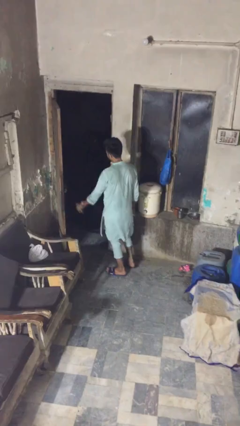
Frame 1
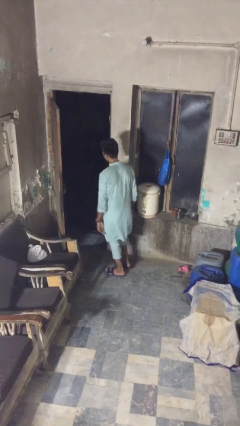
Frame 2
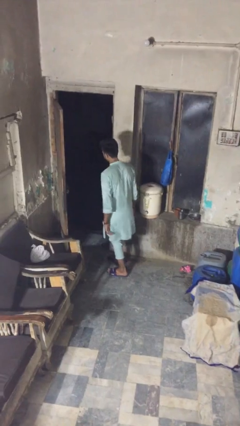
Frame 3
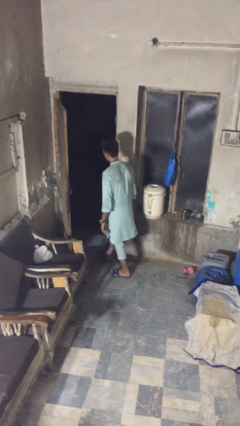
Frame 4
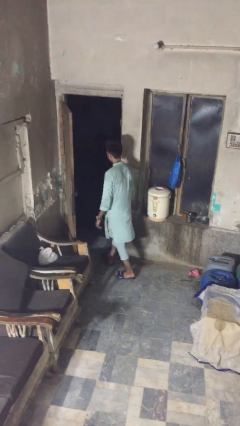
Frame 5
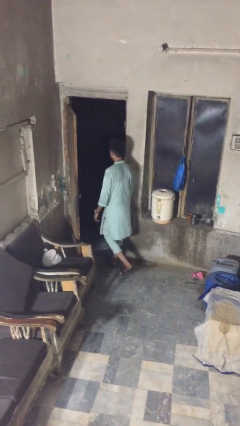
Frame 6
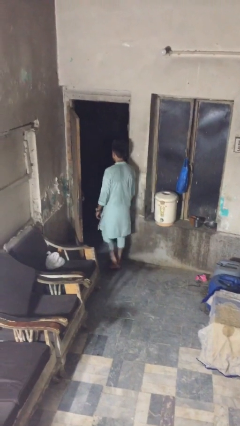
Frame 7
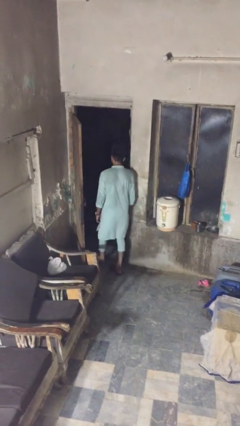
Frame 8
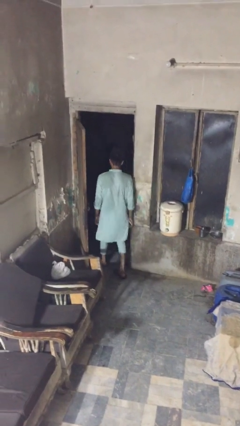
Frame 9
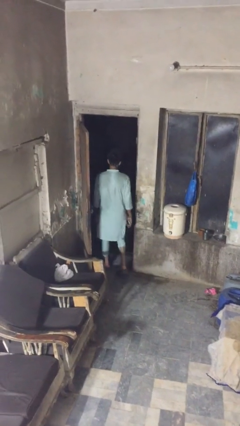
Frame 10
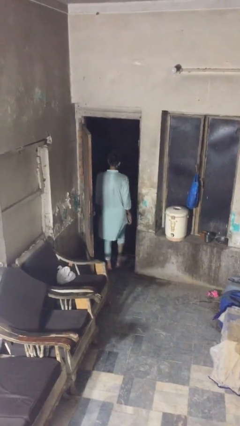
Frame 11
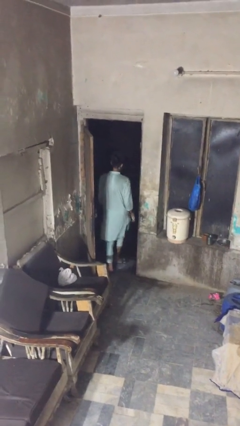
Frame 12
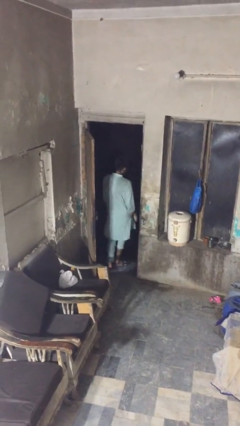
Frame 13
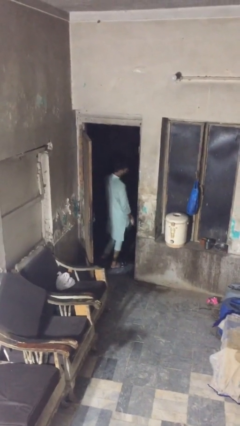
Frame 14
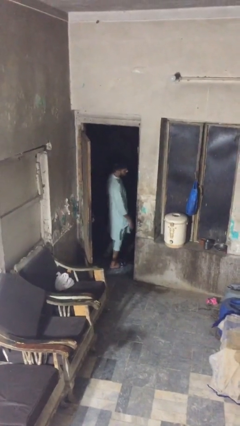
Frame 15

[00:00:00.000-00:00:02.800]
person exits scene through structure

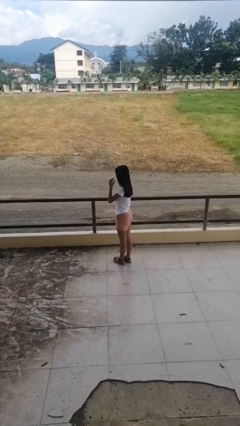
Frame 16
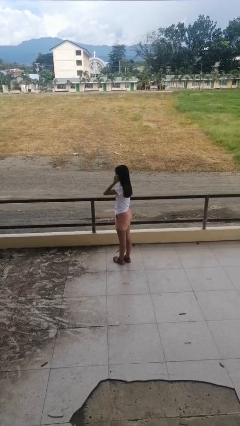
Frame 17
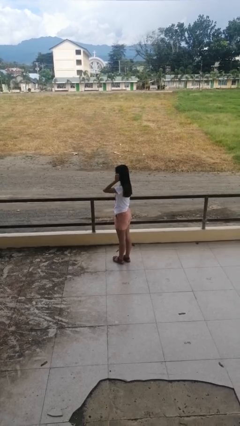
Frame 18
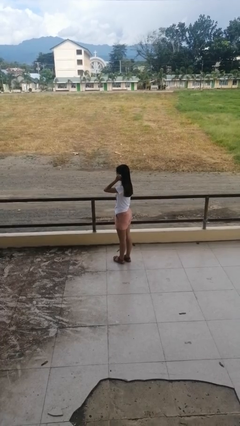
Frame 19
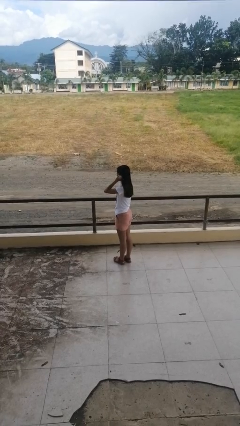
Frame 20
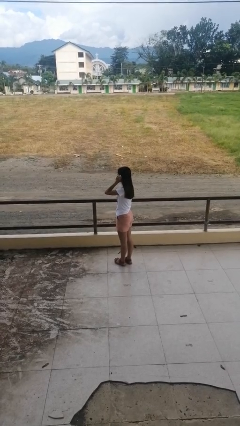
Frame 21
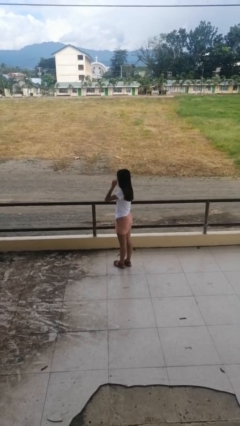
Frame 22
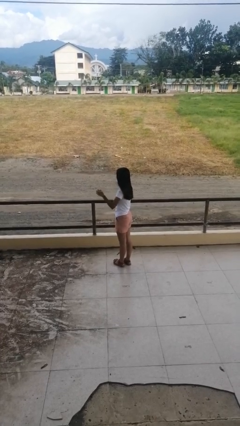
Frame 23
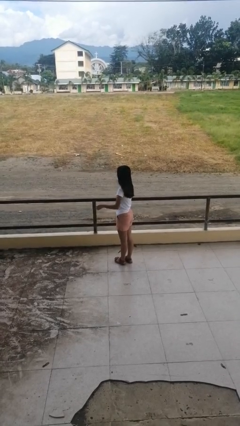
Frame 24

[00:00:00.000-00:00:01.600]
person touches earlobe

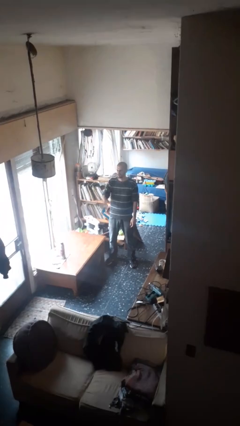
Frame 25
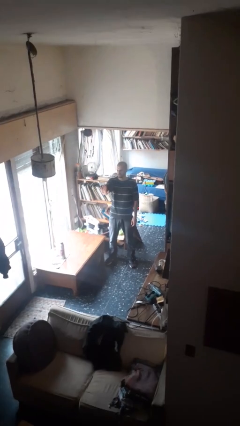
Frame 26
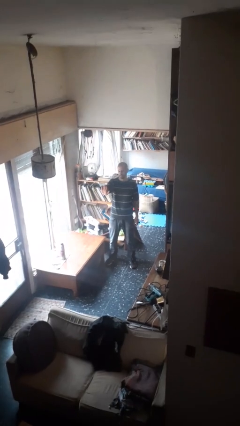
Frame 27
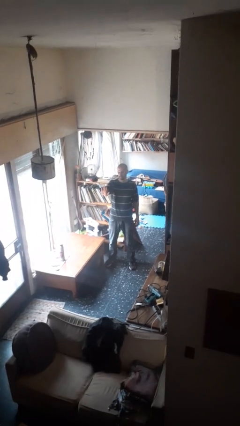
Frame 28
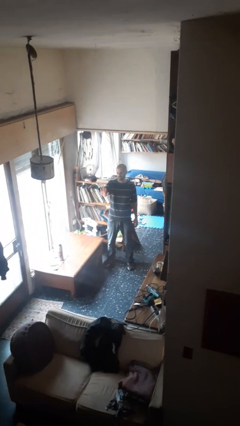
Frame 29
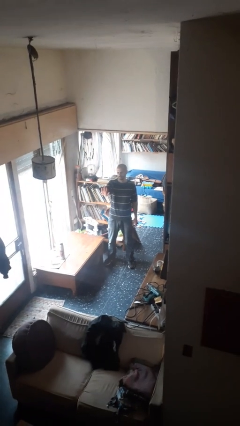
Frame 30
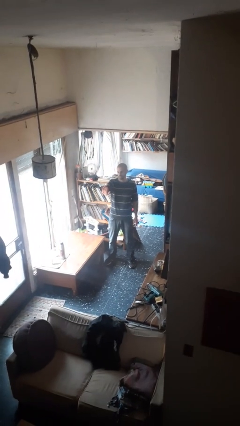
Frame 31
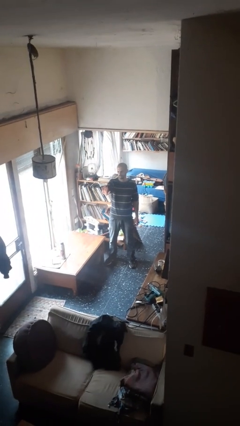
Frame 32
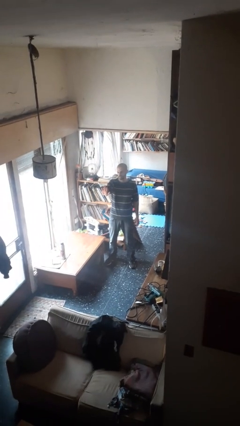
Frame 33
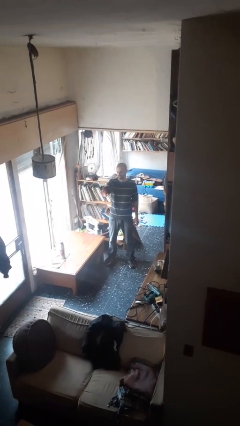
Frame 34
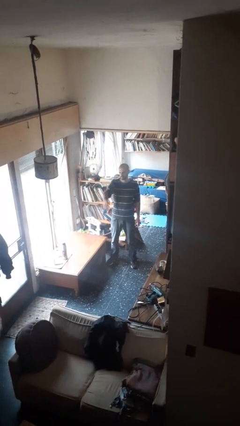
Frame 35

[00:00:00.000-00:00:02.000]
person gestures stop

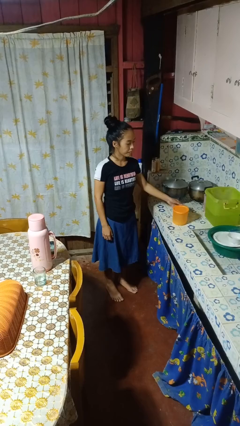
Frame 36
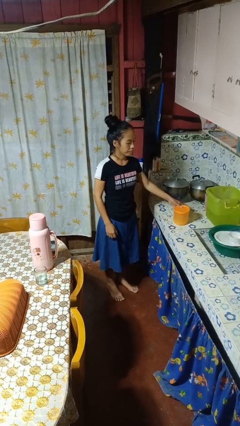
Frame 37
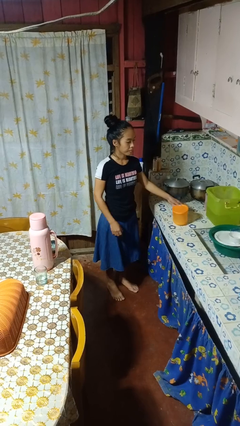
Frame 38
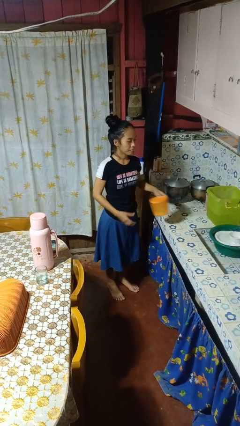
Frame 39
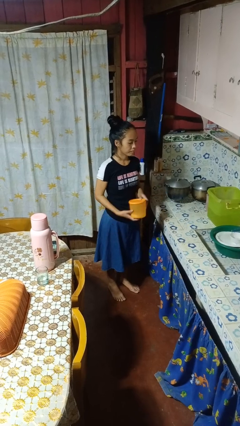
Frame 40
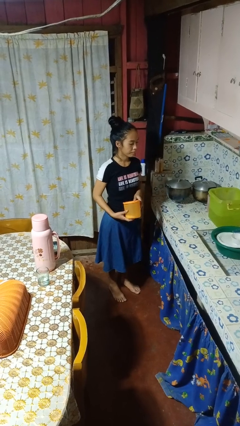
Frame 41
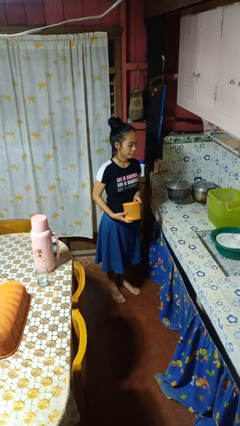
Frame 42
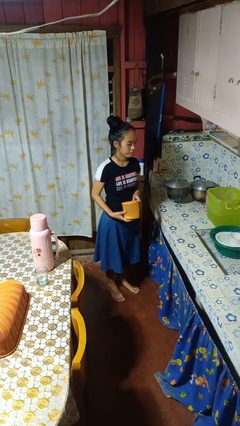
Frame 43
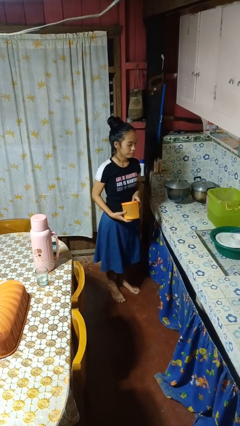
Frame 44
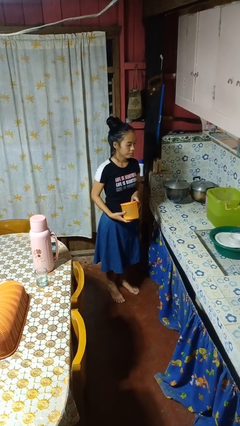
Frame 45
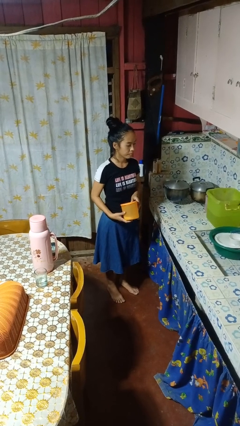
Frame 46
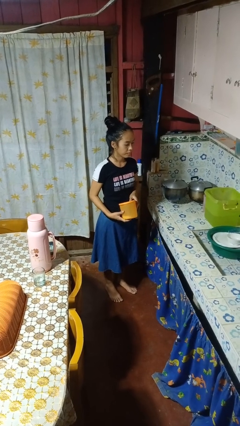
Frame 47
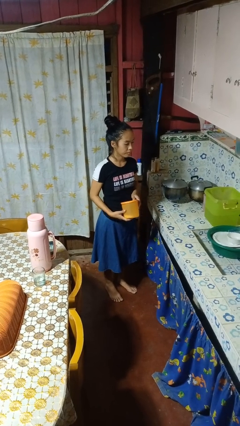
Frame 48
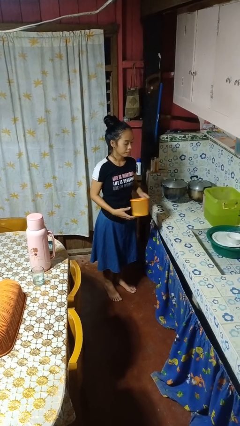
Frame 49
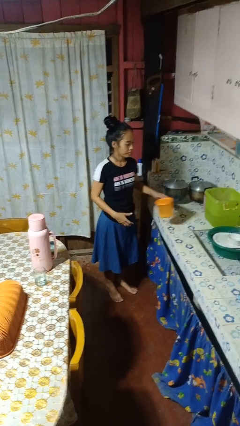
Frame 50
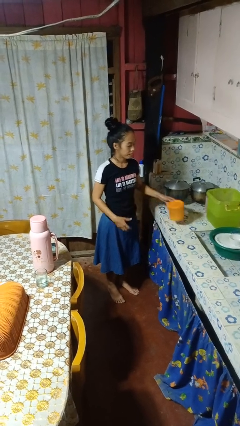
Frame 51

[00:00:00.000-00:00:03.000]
person picks up object from countertop

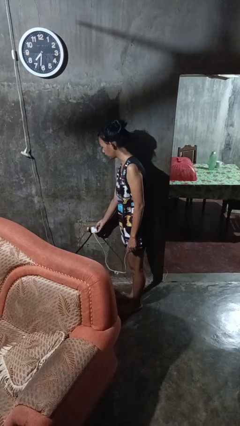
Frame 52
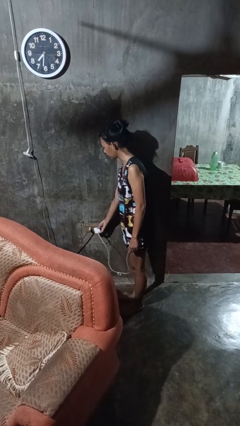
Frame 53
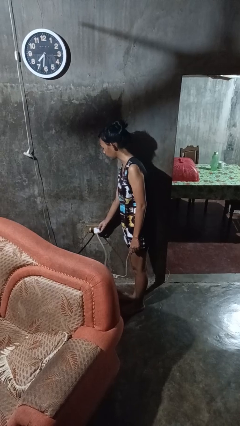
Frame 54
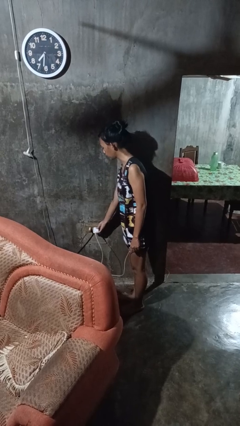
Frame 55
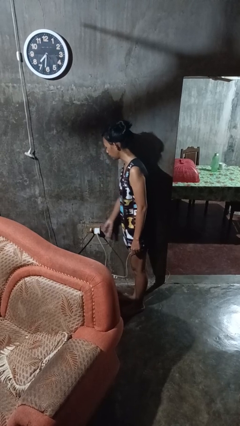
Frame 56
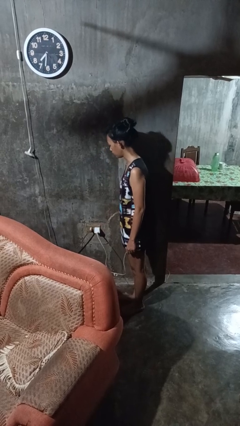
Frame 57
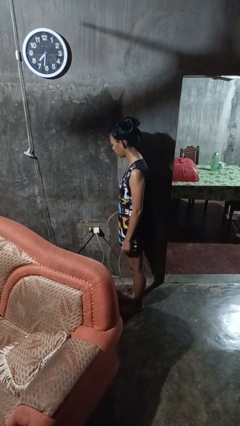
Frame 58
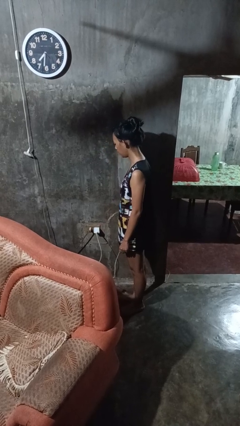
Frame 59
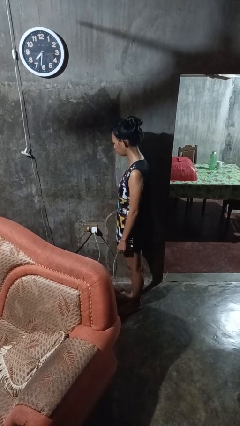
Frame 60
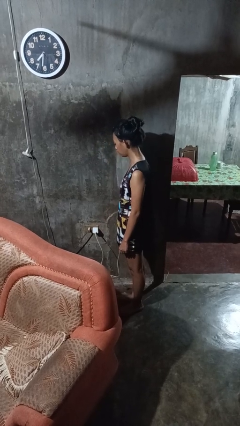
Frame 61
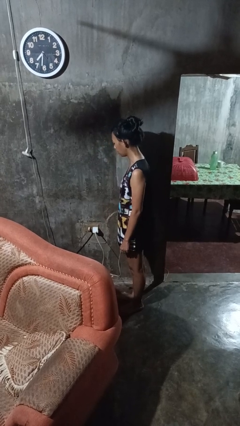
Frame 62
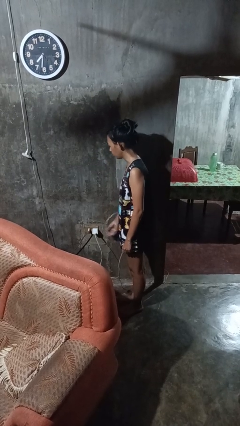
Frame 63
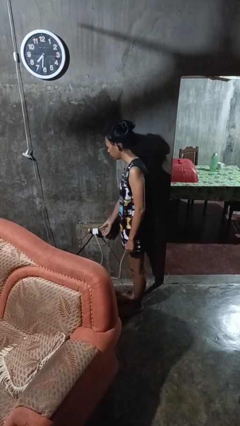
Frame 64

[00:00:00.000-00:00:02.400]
person plugs into electrical socket

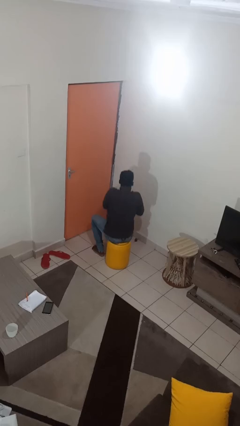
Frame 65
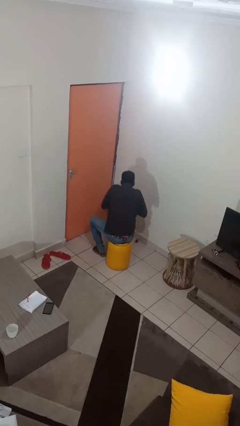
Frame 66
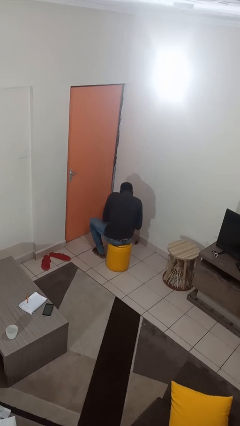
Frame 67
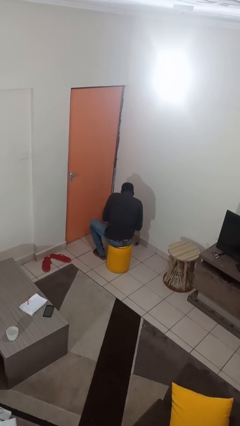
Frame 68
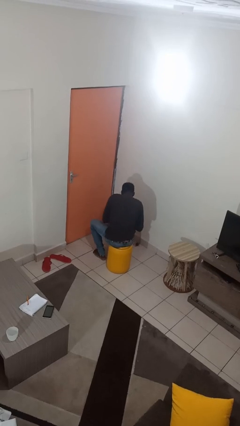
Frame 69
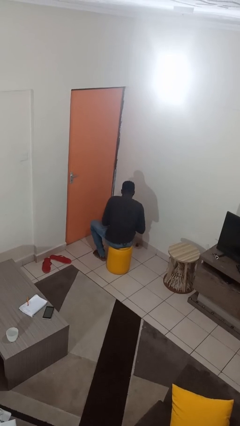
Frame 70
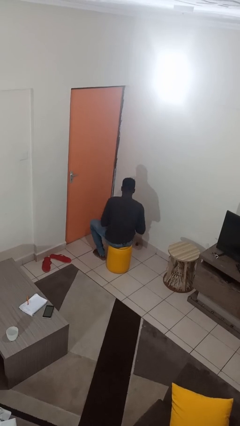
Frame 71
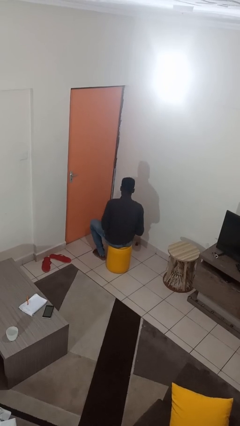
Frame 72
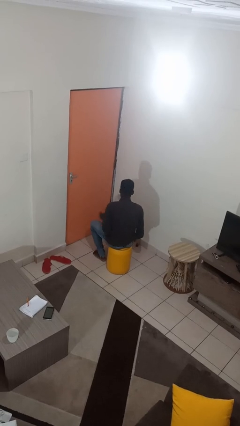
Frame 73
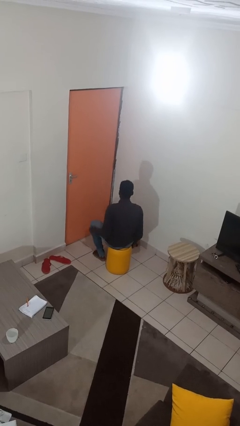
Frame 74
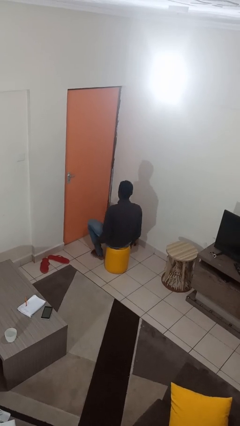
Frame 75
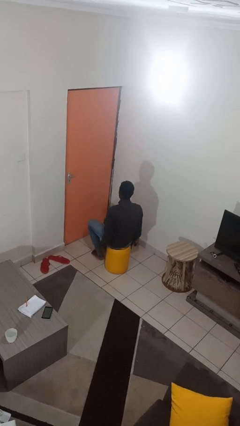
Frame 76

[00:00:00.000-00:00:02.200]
person sneezes into hand

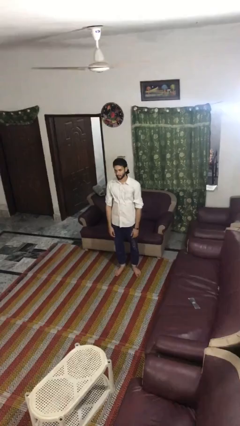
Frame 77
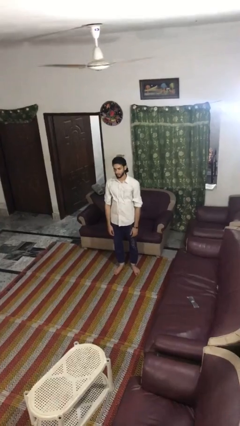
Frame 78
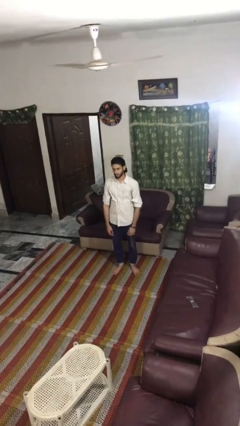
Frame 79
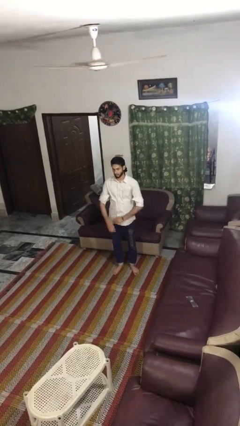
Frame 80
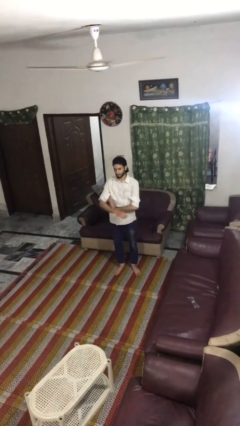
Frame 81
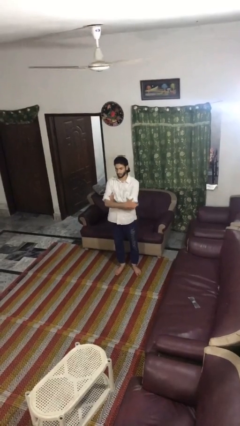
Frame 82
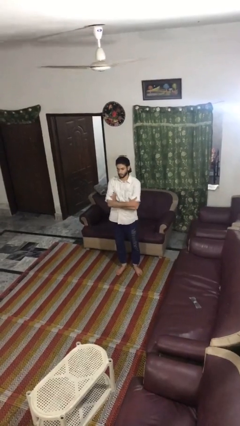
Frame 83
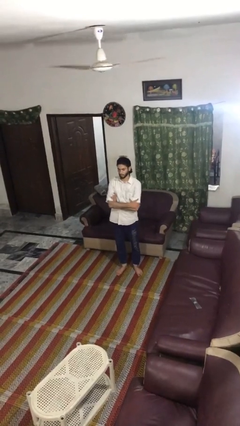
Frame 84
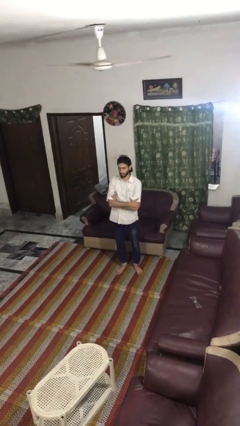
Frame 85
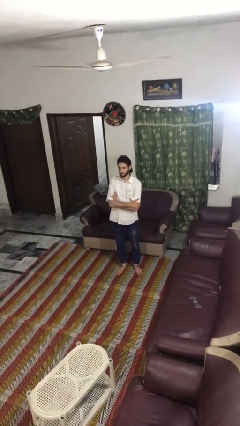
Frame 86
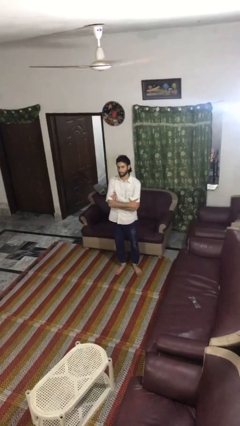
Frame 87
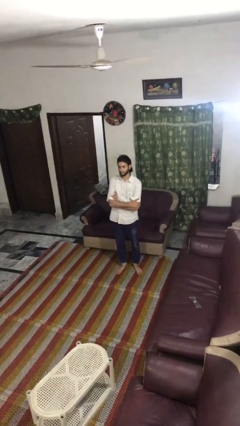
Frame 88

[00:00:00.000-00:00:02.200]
person crosses arms

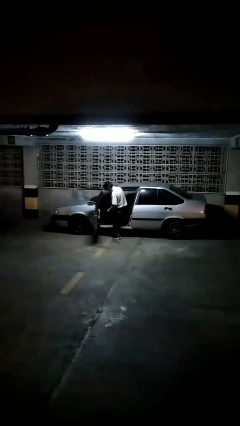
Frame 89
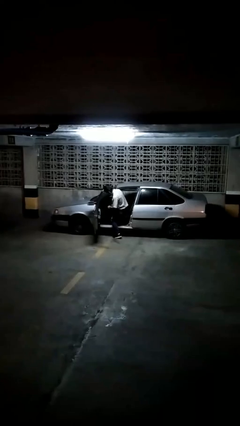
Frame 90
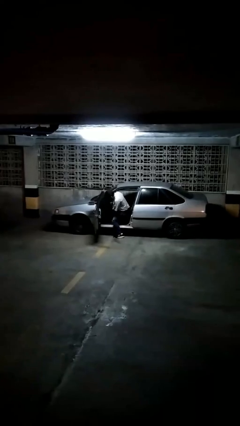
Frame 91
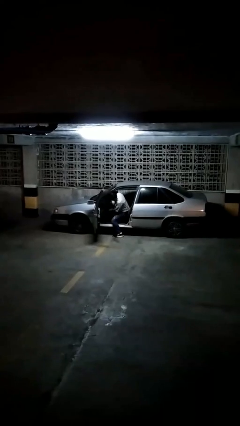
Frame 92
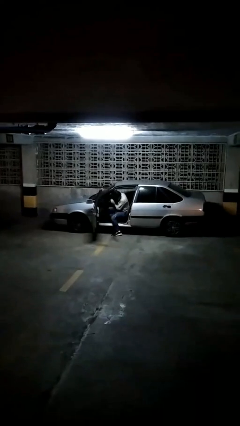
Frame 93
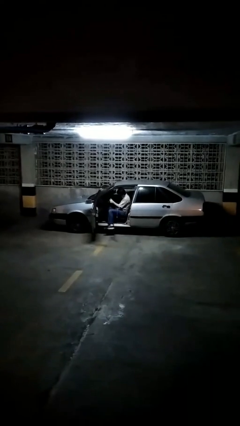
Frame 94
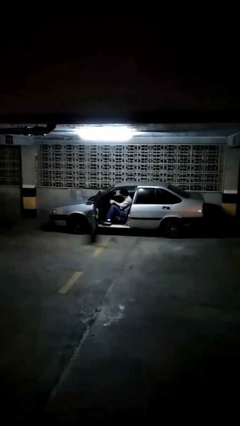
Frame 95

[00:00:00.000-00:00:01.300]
person enters car
